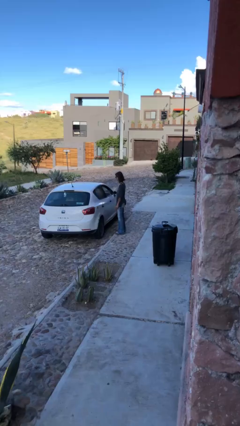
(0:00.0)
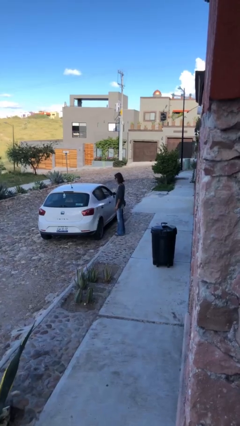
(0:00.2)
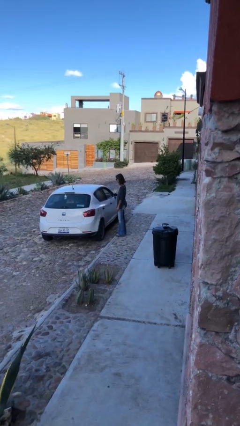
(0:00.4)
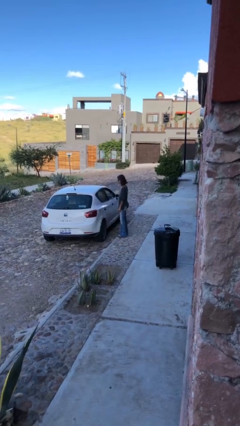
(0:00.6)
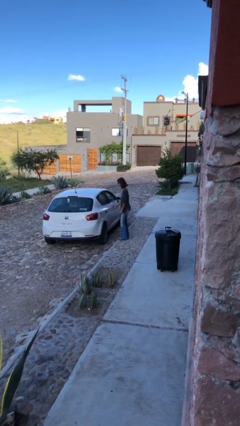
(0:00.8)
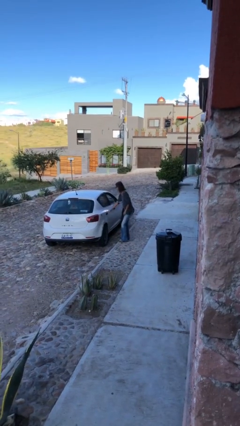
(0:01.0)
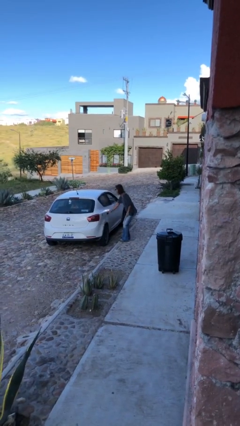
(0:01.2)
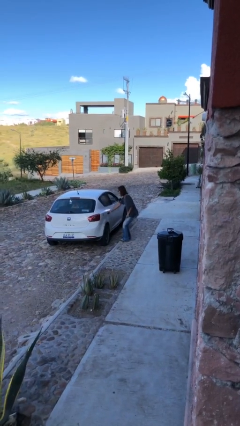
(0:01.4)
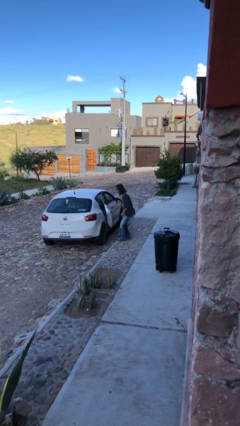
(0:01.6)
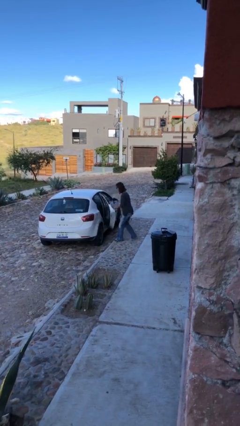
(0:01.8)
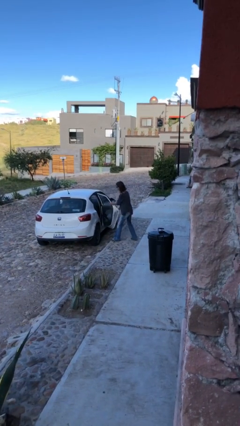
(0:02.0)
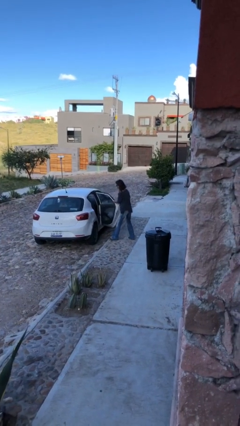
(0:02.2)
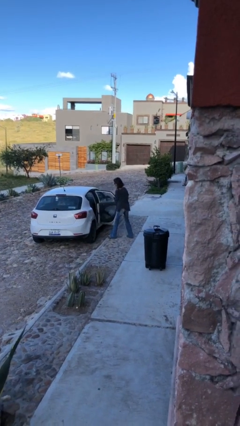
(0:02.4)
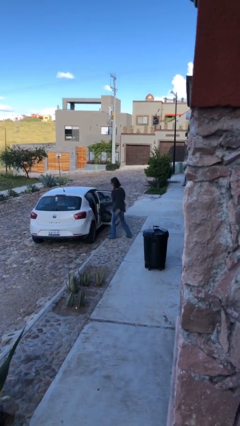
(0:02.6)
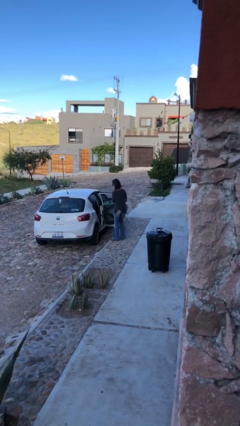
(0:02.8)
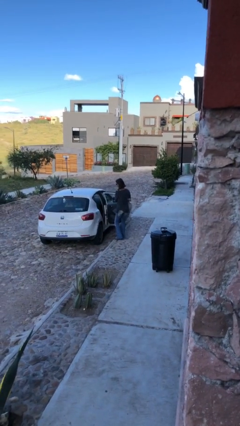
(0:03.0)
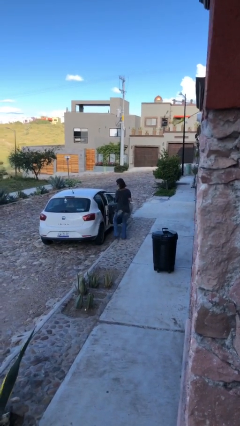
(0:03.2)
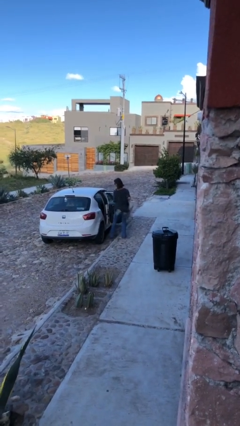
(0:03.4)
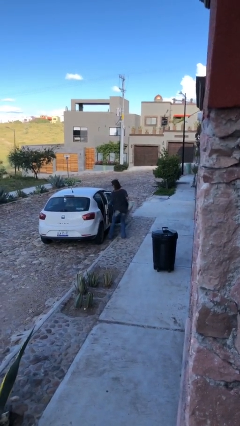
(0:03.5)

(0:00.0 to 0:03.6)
person opens car door

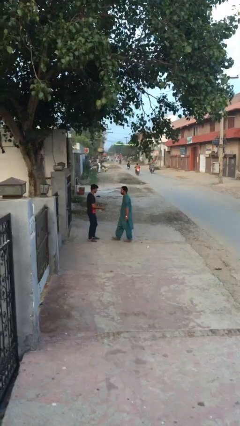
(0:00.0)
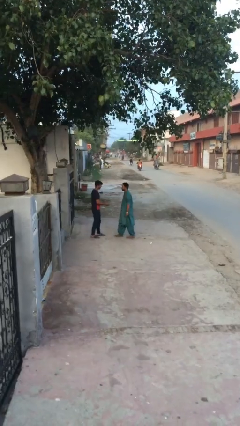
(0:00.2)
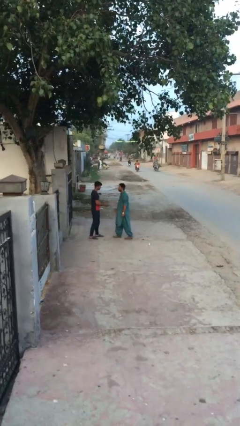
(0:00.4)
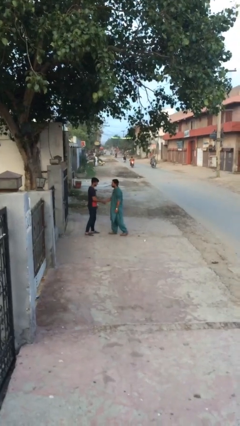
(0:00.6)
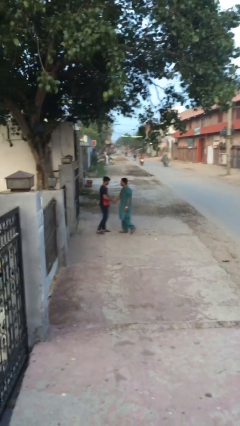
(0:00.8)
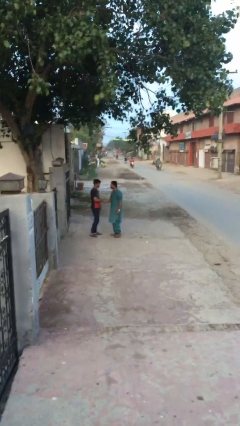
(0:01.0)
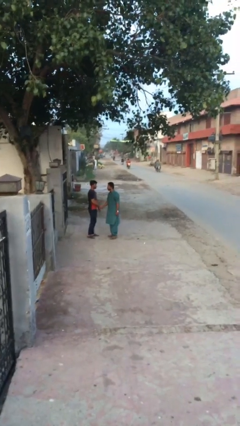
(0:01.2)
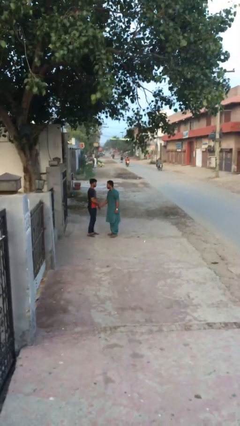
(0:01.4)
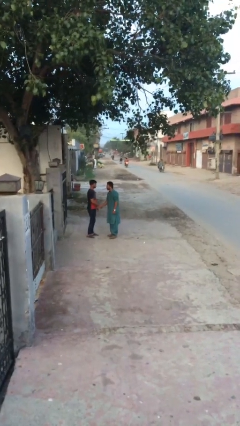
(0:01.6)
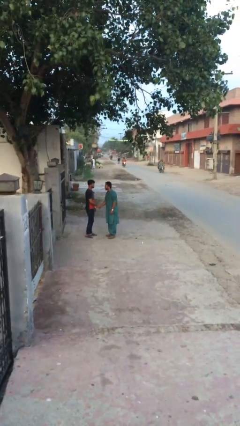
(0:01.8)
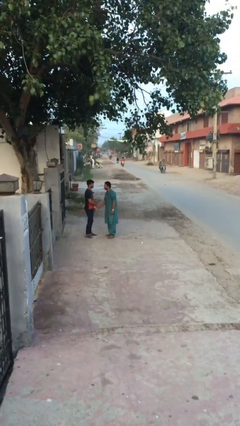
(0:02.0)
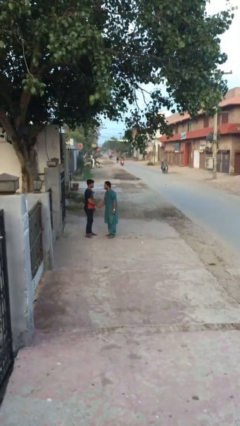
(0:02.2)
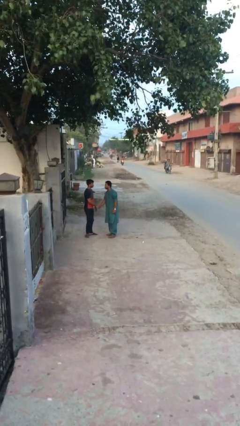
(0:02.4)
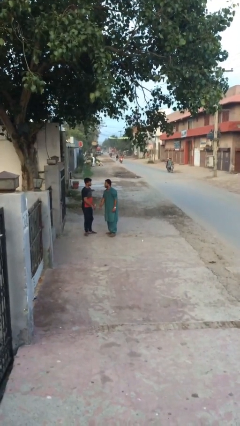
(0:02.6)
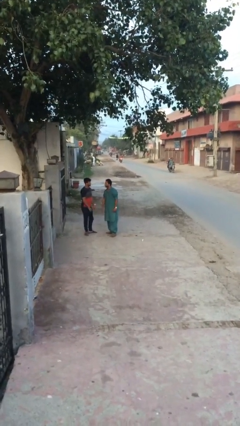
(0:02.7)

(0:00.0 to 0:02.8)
person shakes hand

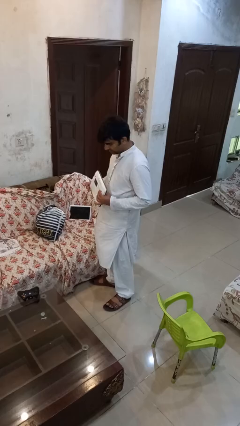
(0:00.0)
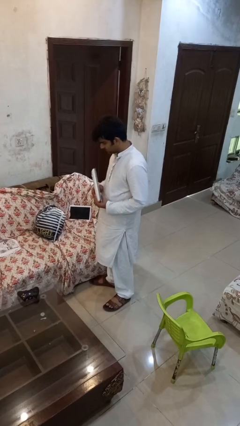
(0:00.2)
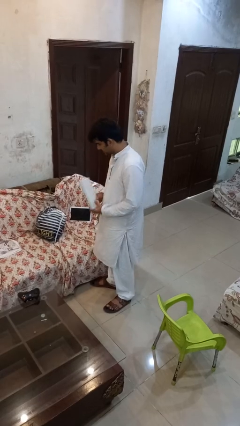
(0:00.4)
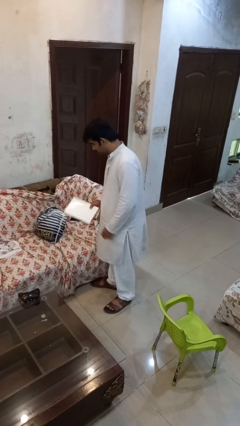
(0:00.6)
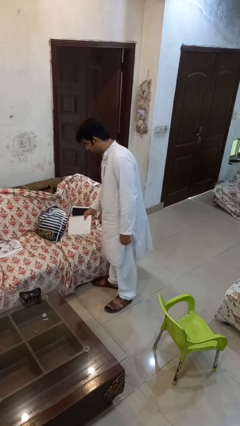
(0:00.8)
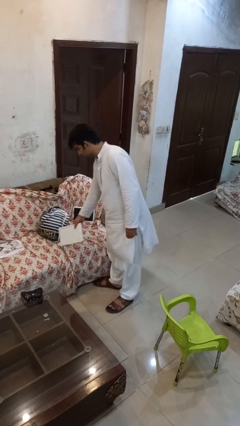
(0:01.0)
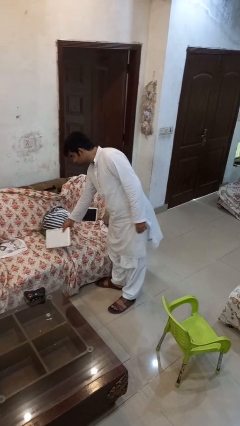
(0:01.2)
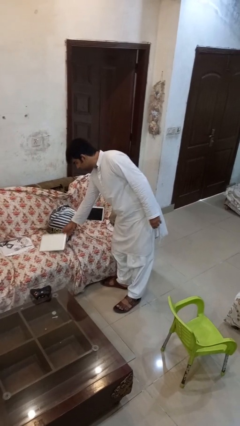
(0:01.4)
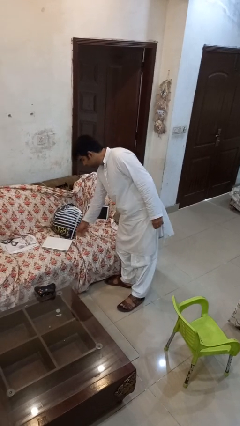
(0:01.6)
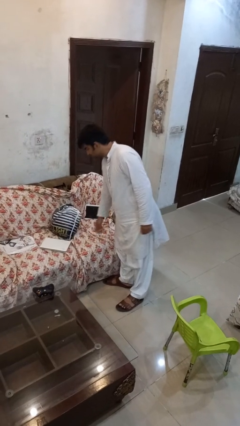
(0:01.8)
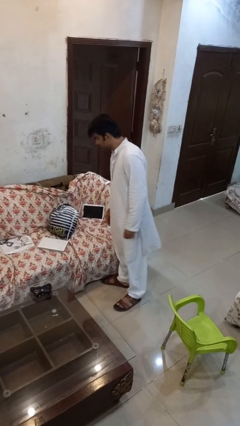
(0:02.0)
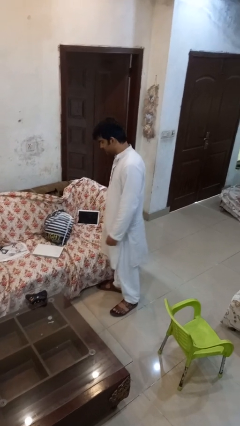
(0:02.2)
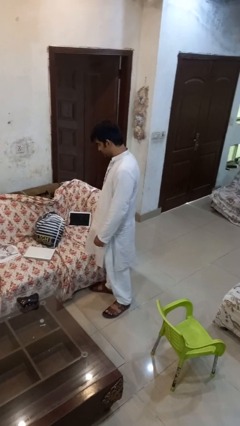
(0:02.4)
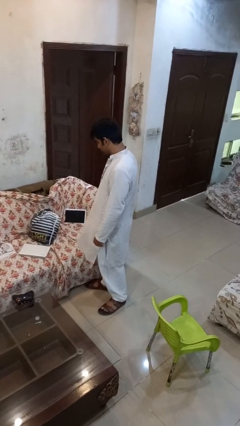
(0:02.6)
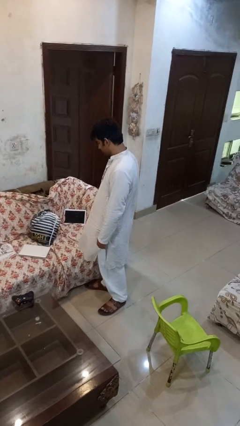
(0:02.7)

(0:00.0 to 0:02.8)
person puts down object on couch

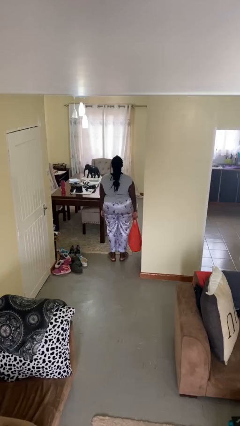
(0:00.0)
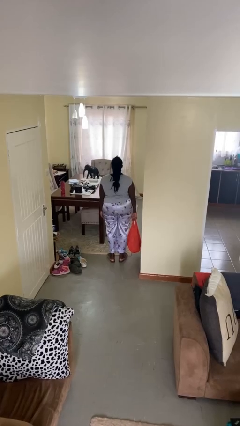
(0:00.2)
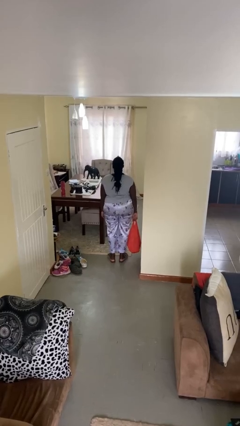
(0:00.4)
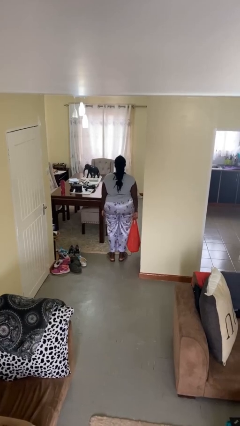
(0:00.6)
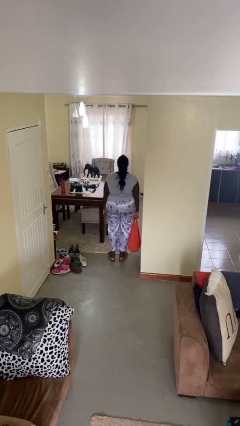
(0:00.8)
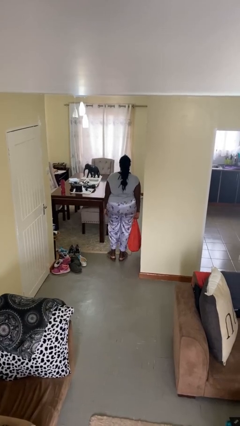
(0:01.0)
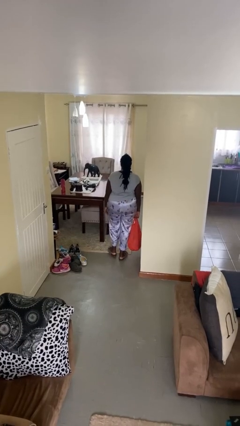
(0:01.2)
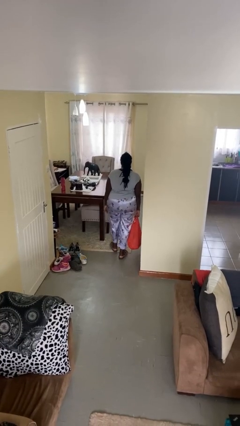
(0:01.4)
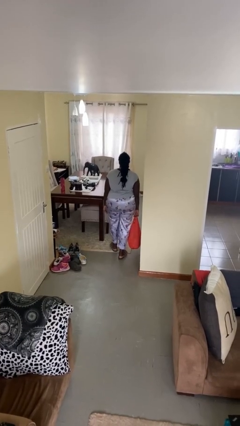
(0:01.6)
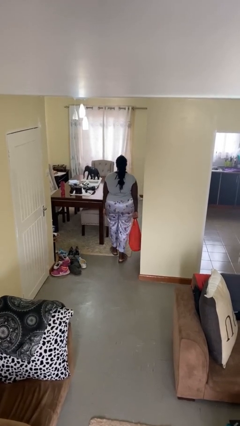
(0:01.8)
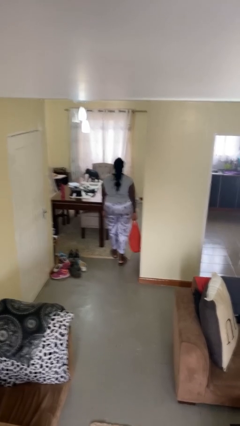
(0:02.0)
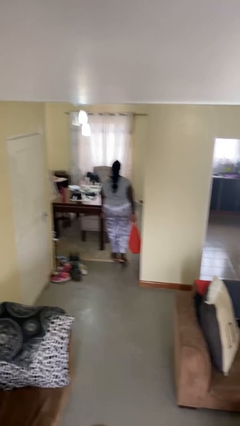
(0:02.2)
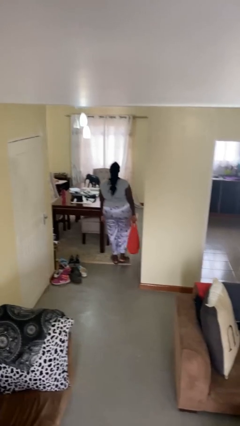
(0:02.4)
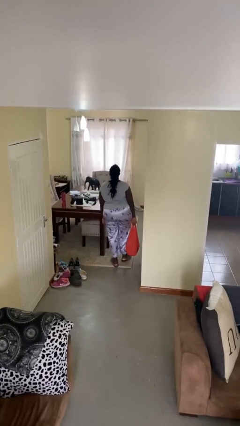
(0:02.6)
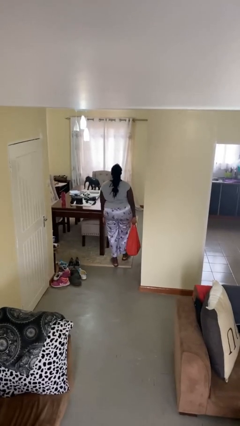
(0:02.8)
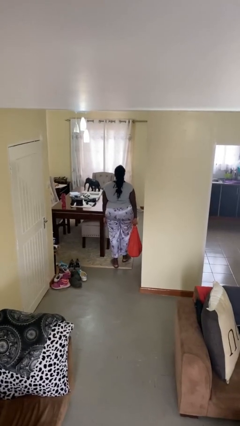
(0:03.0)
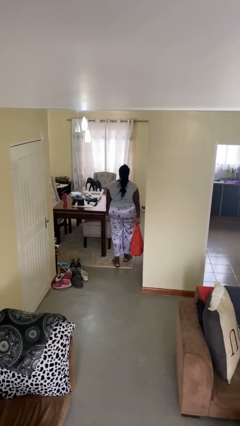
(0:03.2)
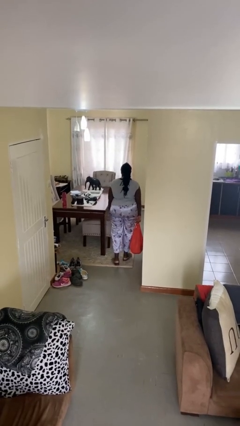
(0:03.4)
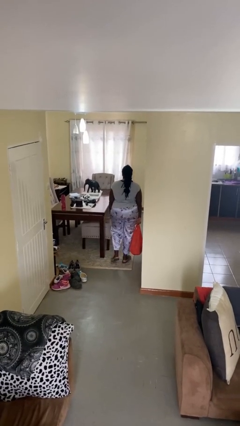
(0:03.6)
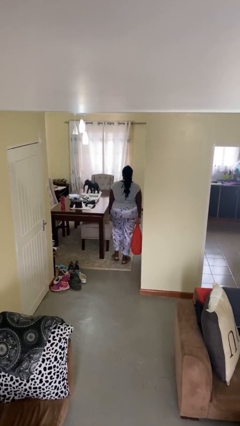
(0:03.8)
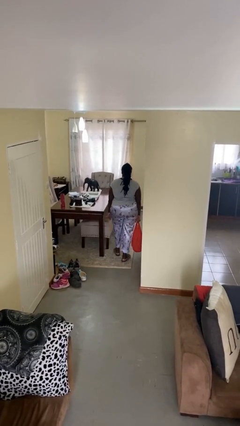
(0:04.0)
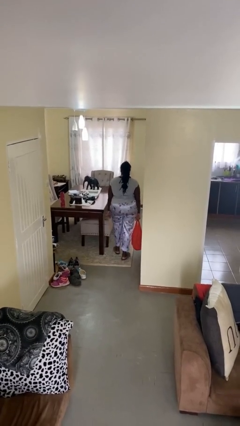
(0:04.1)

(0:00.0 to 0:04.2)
person carries groceries

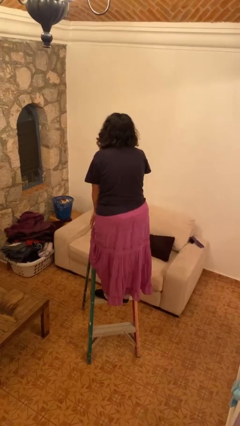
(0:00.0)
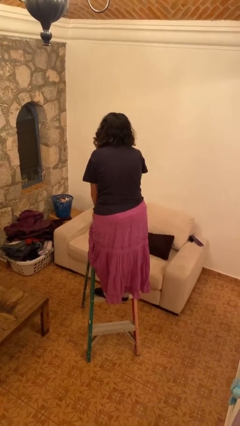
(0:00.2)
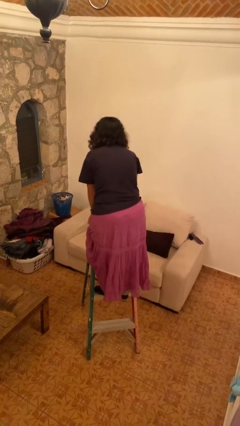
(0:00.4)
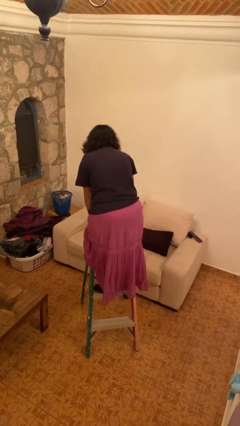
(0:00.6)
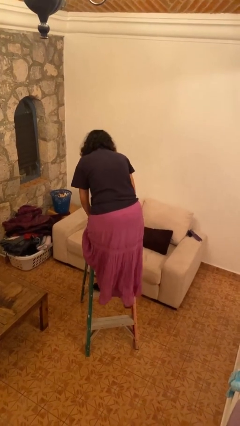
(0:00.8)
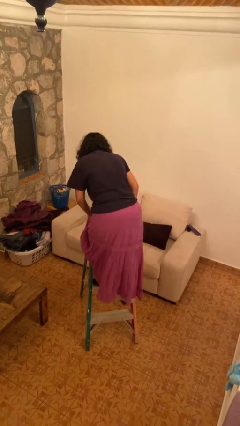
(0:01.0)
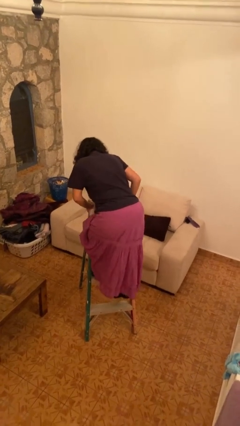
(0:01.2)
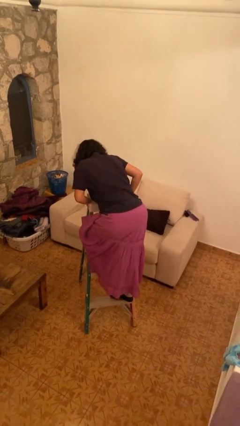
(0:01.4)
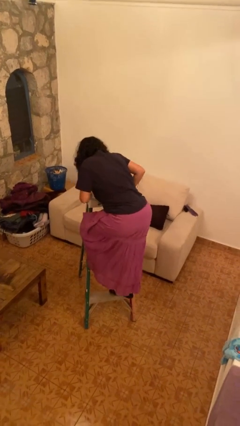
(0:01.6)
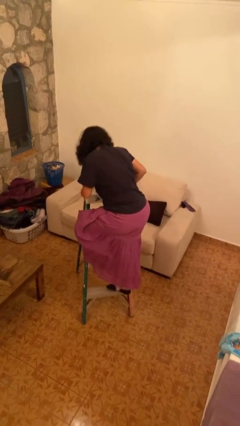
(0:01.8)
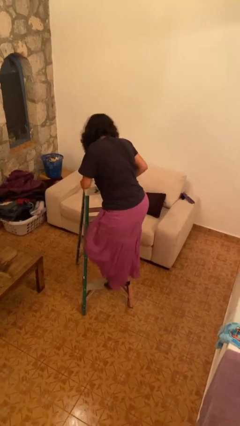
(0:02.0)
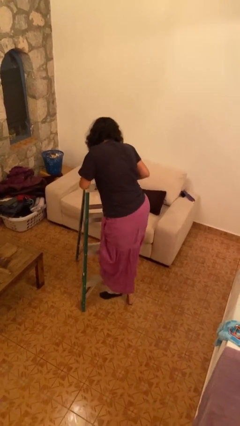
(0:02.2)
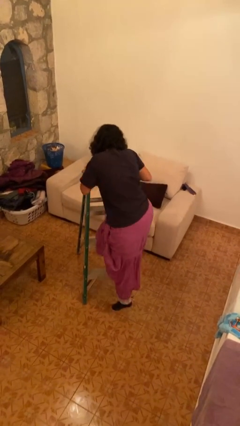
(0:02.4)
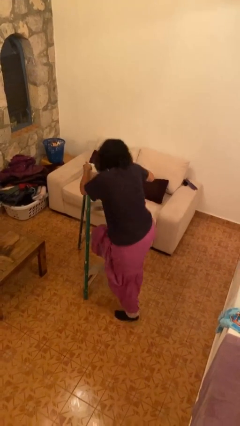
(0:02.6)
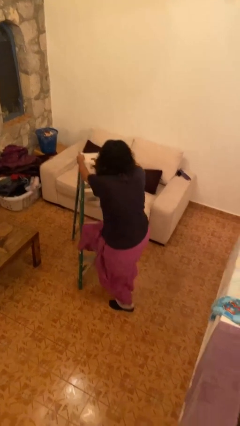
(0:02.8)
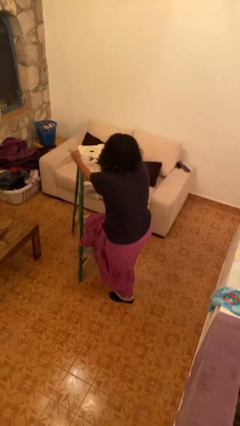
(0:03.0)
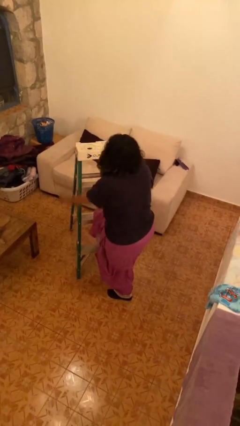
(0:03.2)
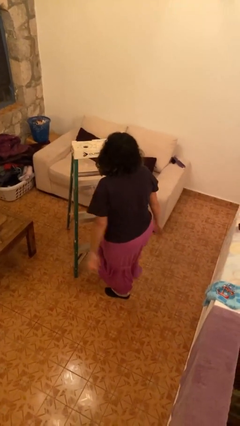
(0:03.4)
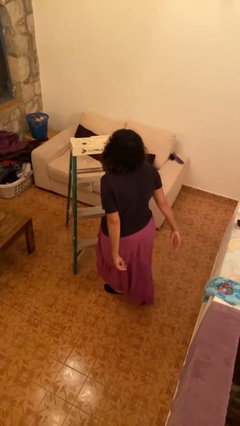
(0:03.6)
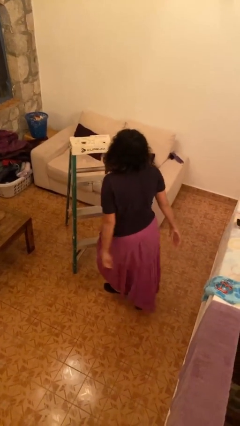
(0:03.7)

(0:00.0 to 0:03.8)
person climbs down ladder
